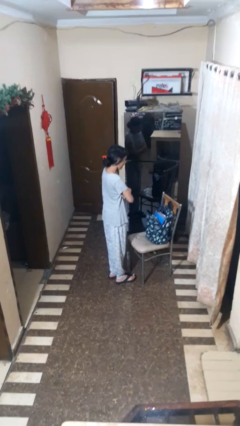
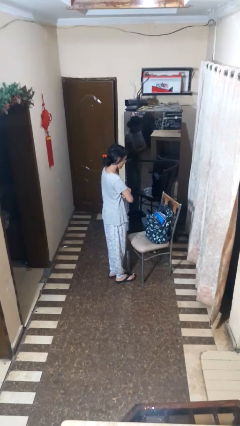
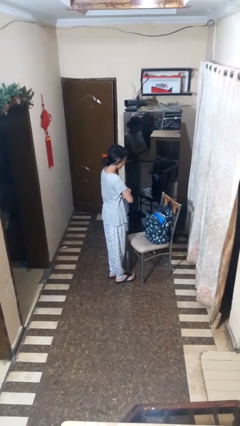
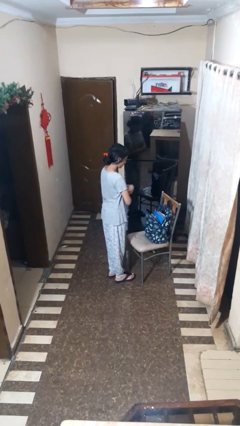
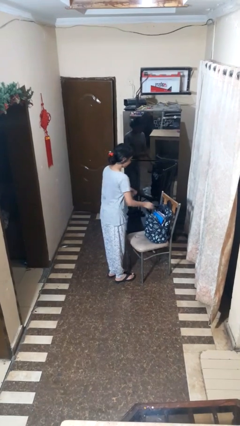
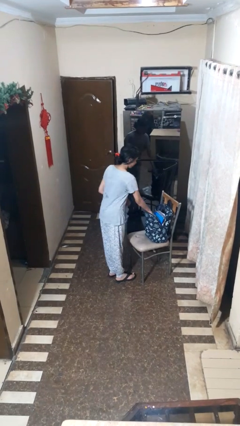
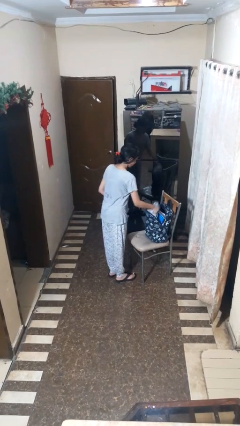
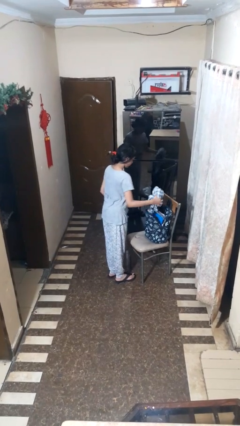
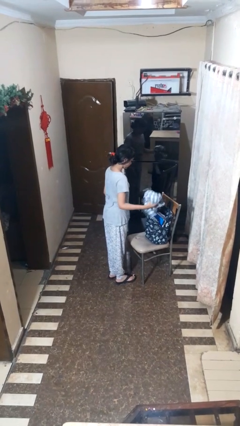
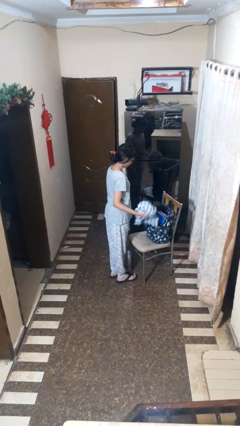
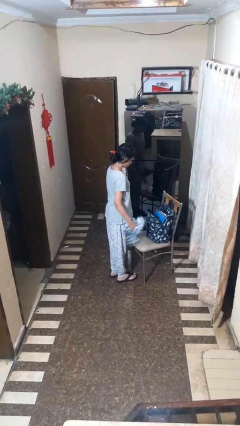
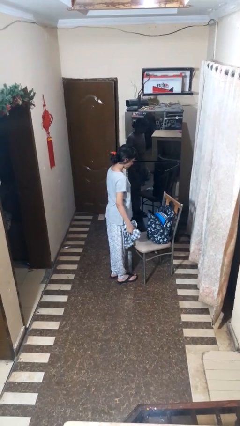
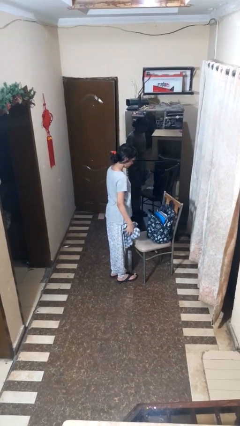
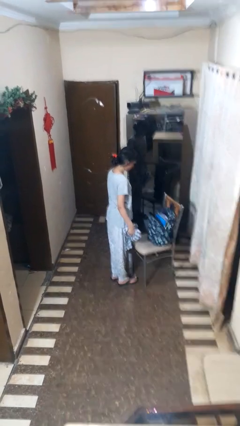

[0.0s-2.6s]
person takes object from bag

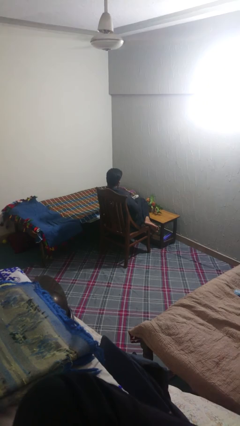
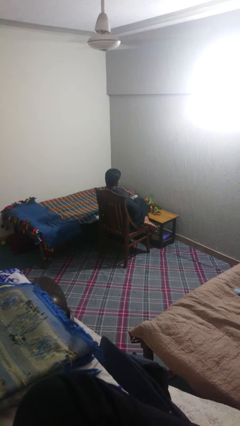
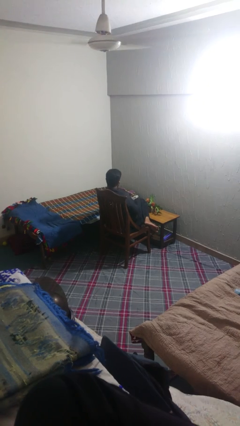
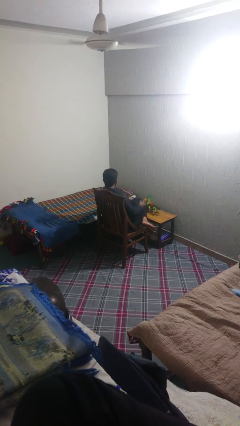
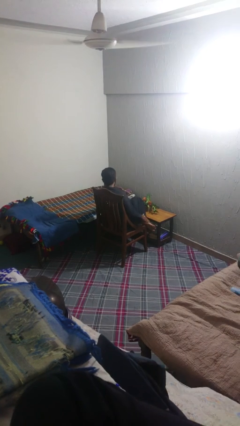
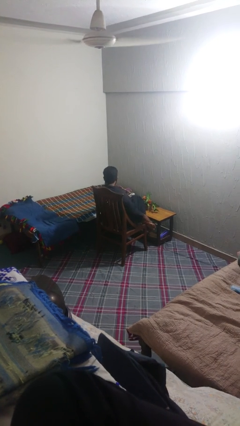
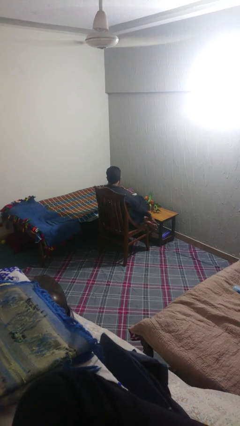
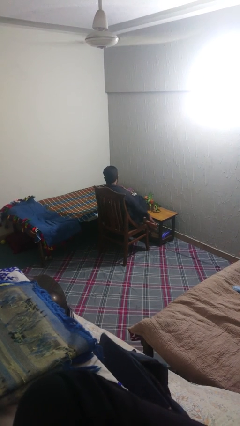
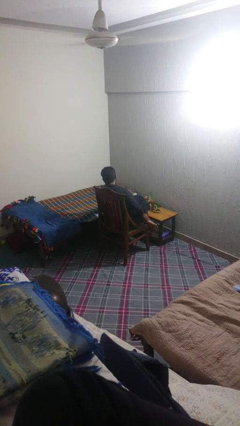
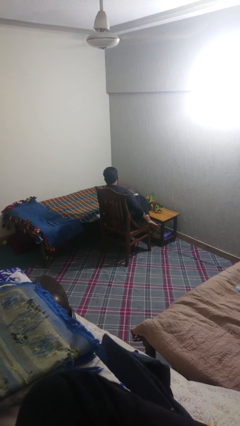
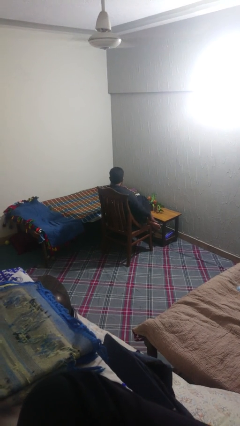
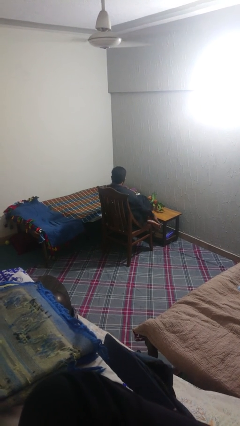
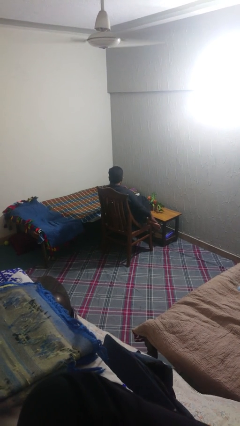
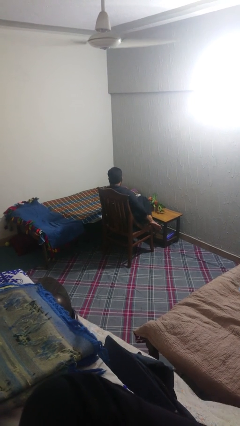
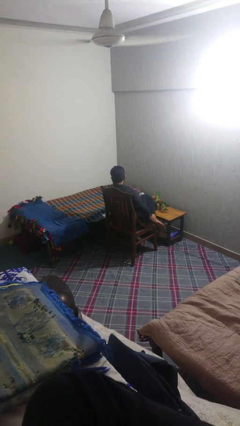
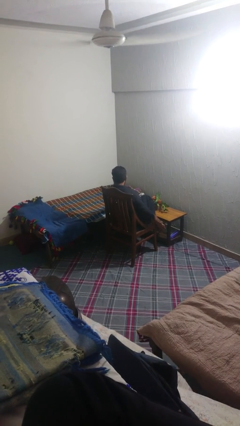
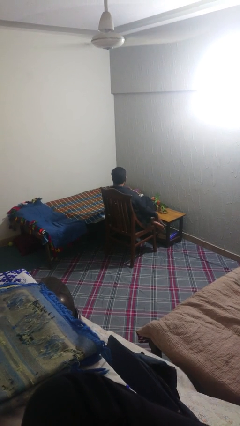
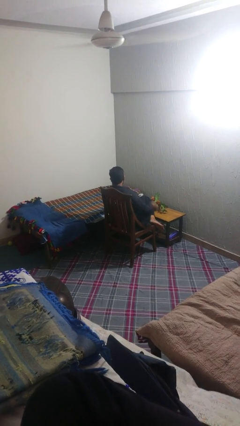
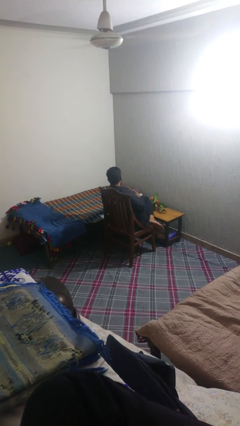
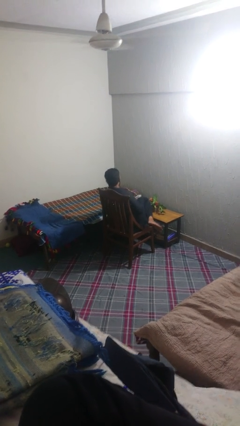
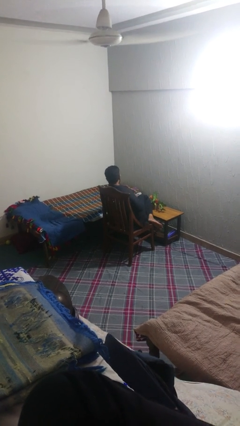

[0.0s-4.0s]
person rubs foot

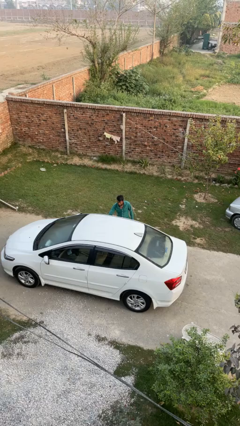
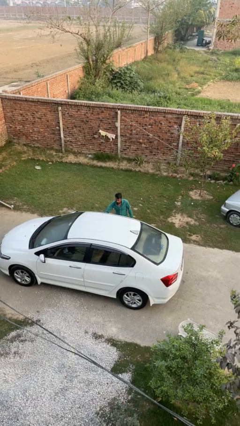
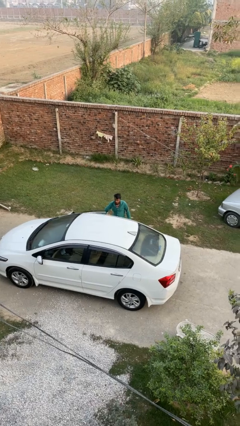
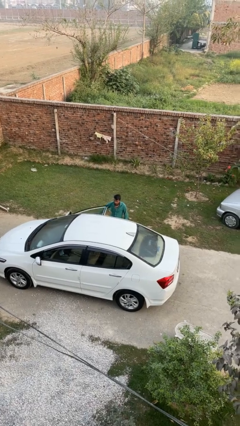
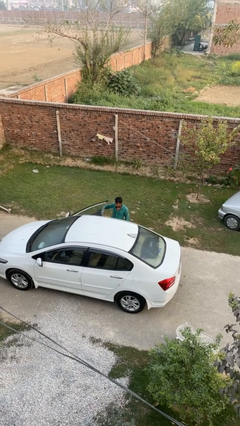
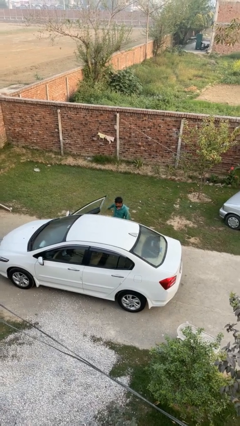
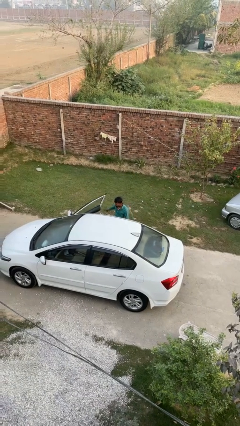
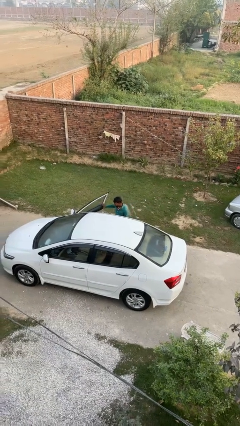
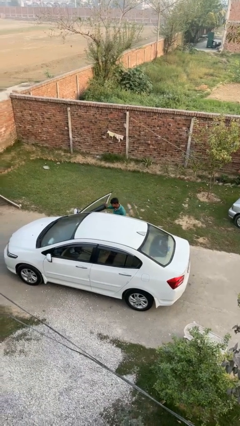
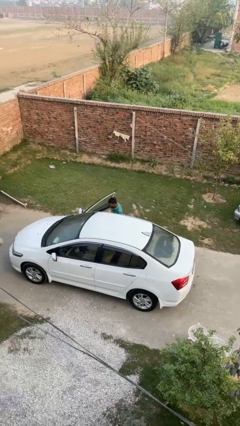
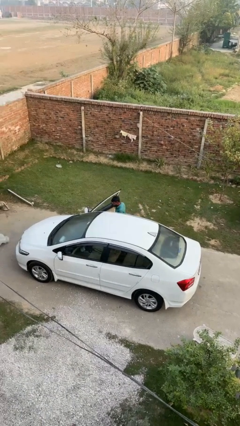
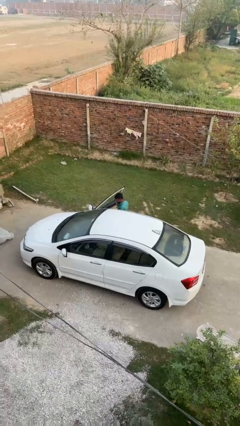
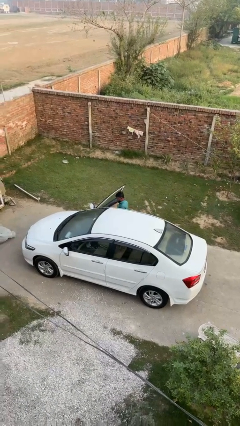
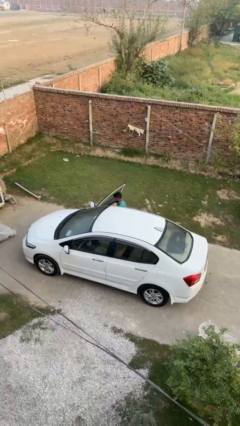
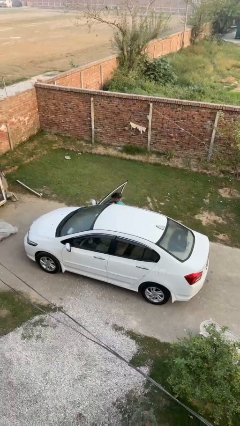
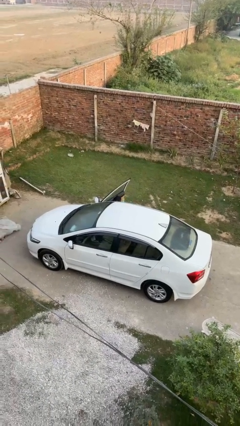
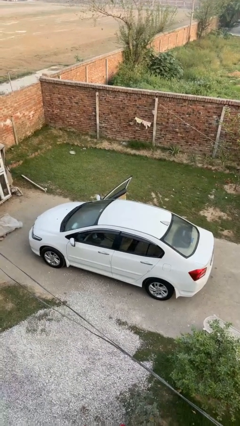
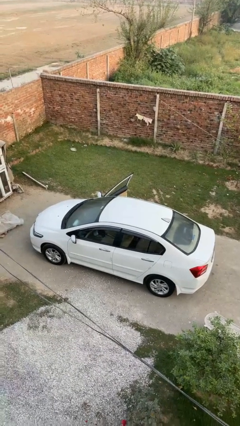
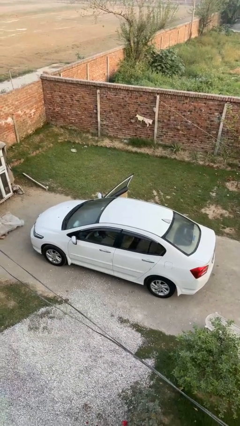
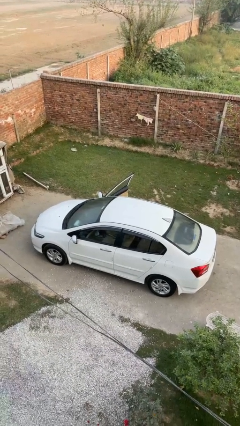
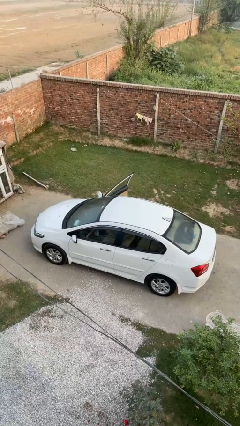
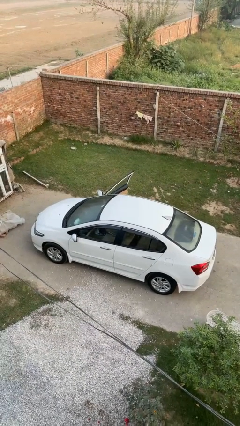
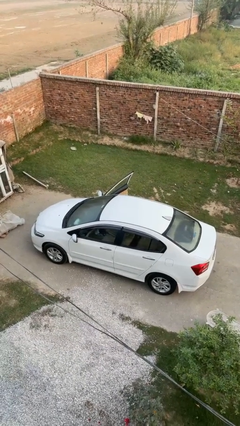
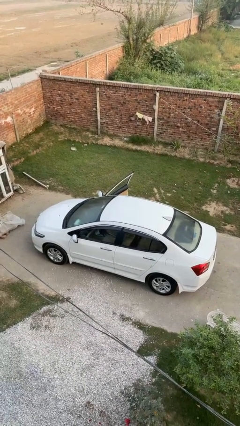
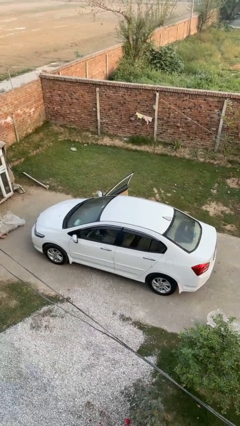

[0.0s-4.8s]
person enters car

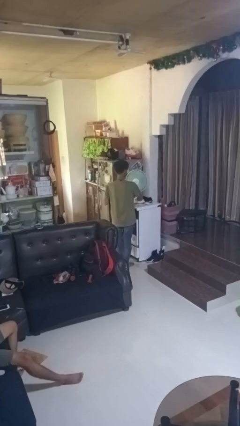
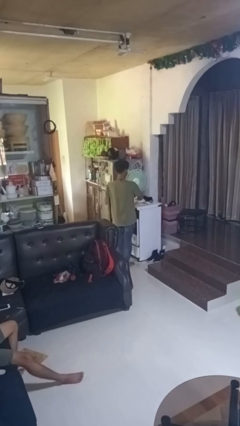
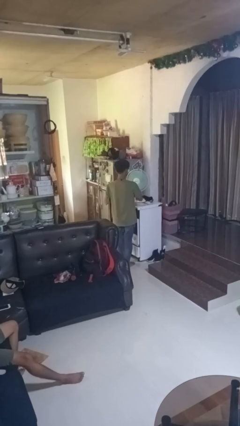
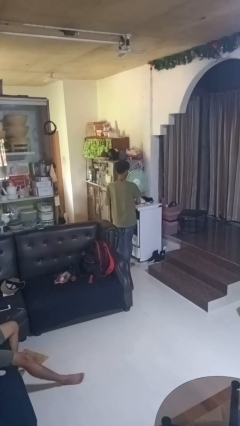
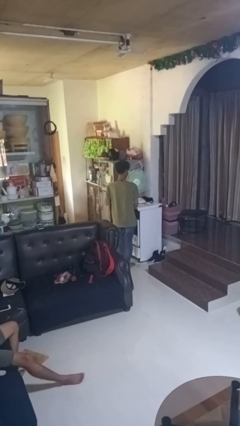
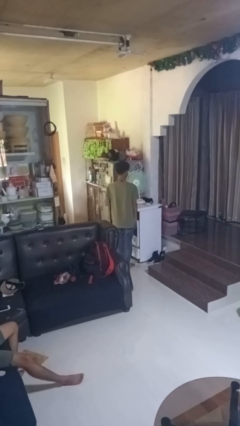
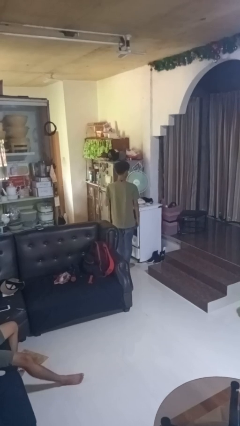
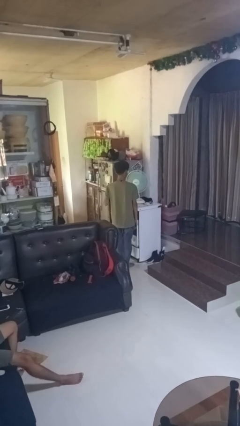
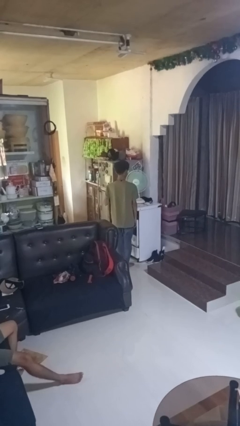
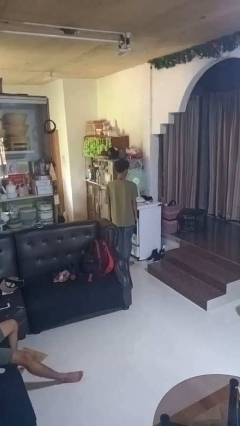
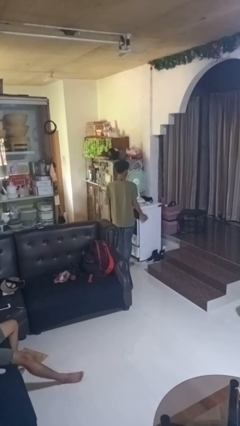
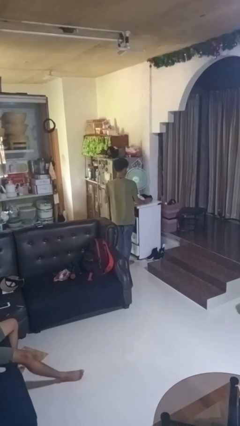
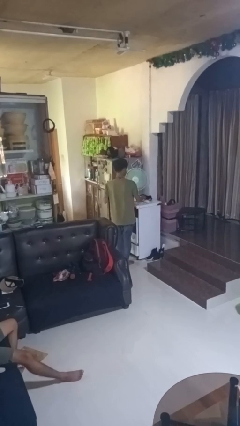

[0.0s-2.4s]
person turns on fan

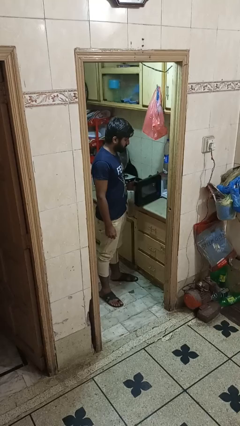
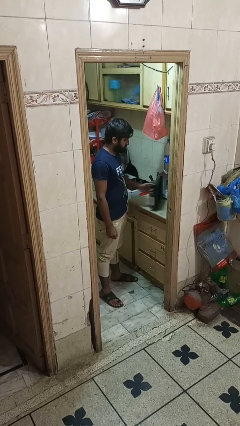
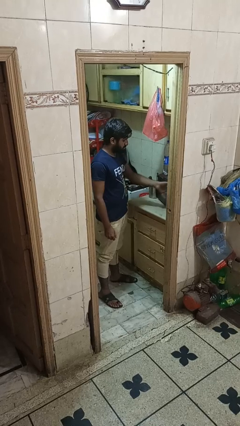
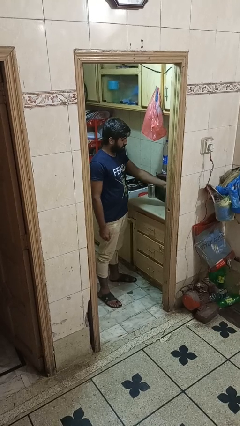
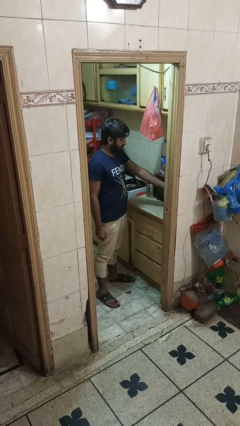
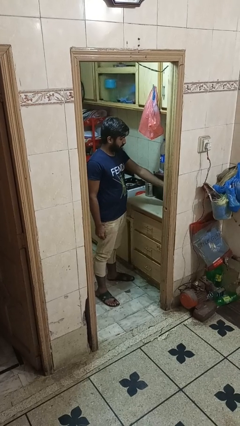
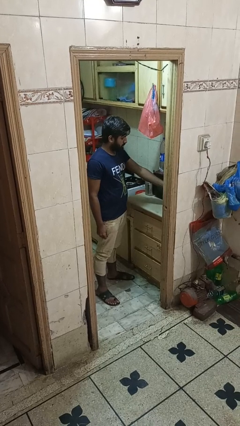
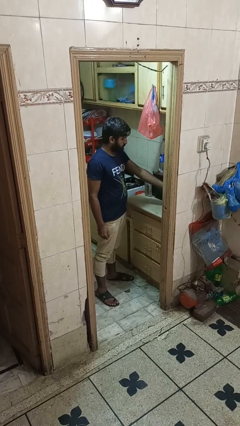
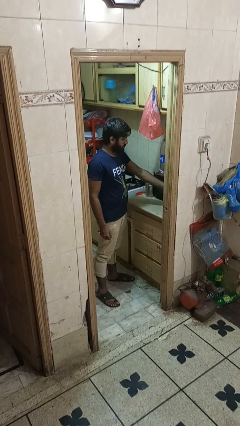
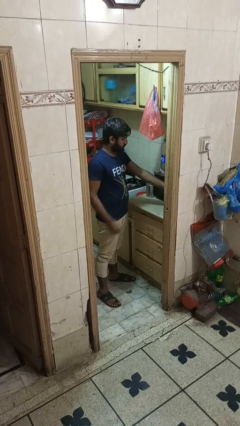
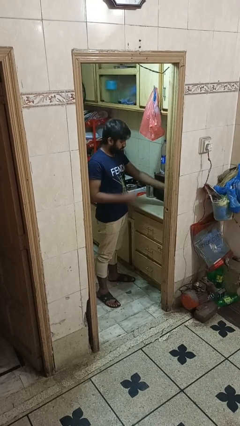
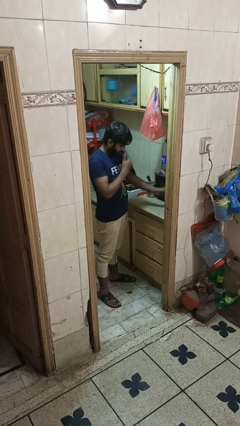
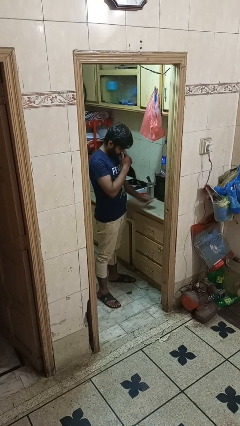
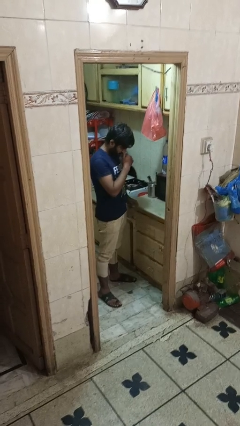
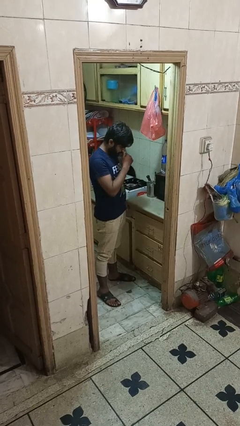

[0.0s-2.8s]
person closes oven door

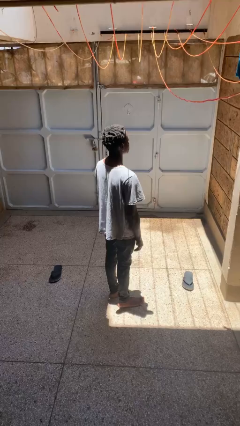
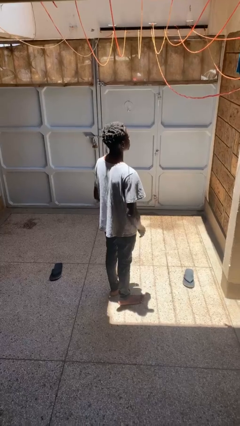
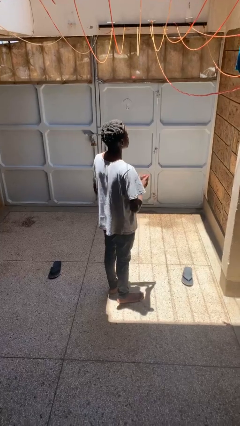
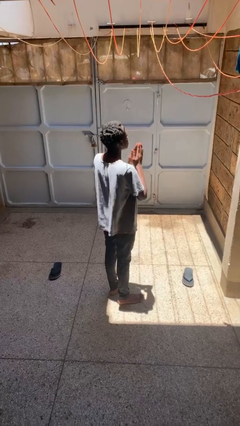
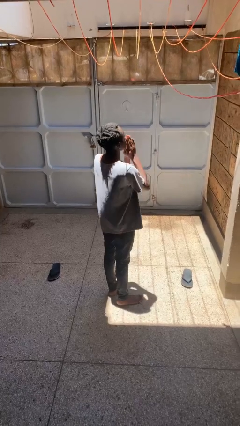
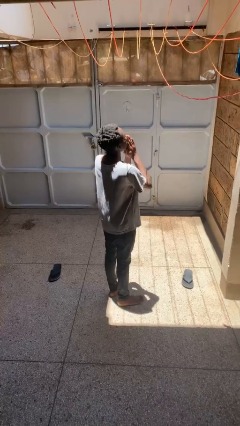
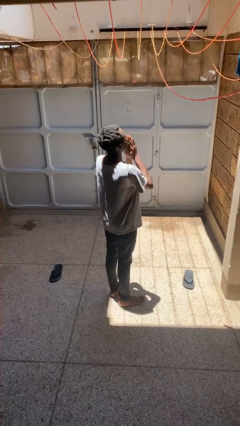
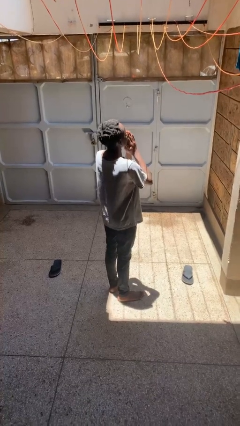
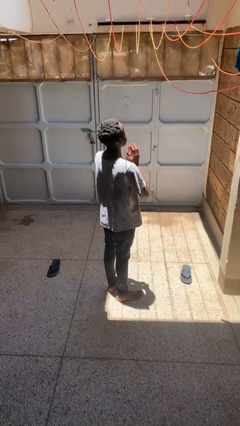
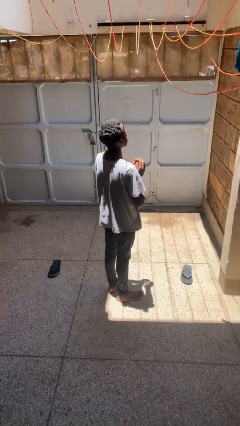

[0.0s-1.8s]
person prays
